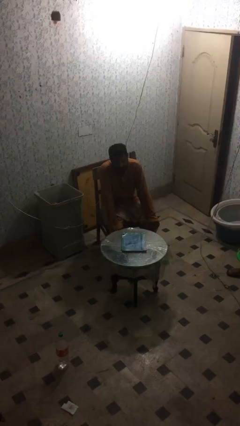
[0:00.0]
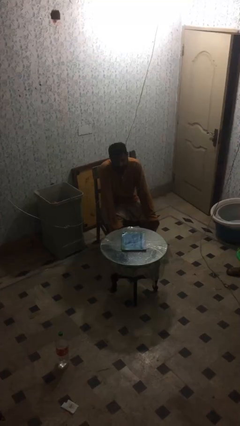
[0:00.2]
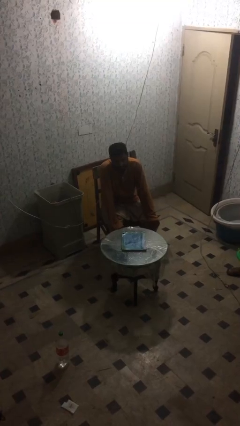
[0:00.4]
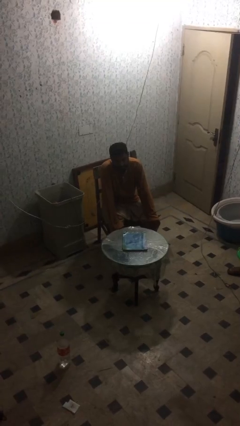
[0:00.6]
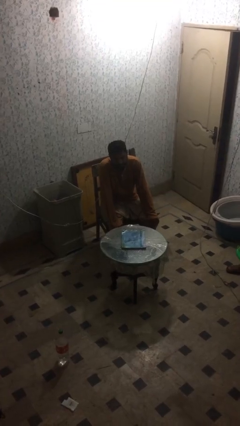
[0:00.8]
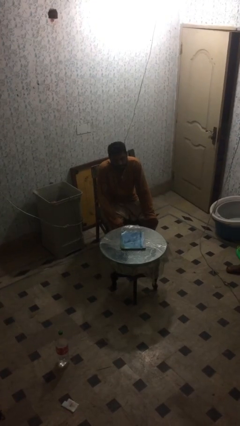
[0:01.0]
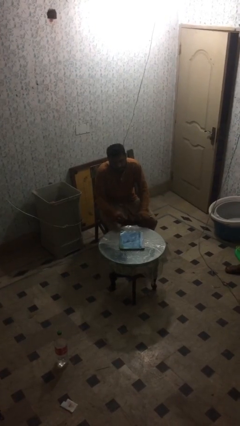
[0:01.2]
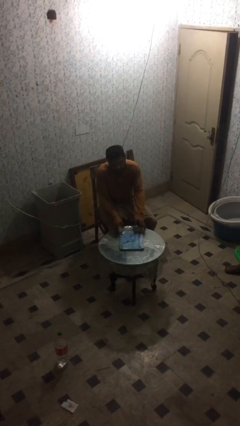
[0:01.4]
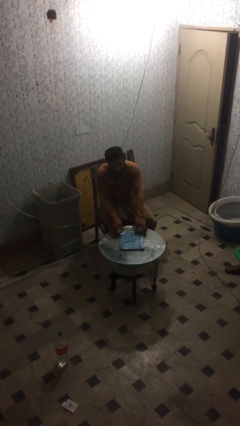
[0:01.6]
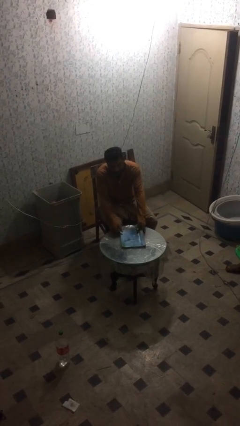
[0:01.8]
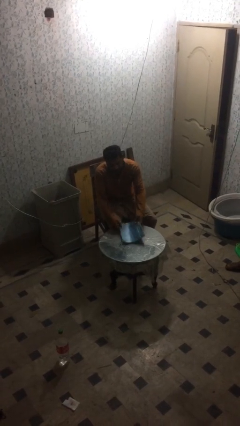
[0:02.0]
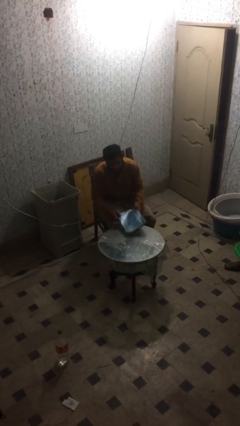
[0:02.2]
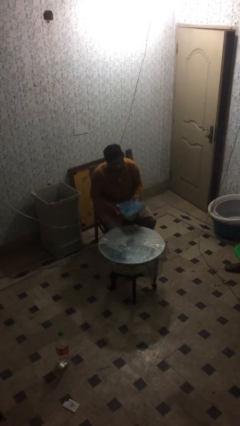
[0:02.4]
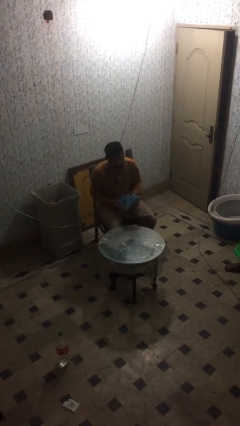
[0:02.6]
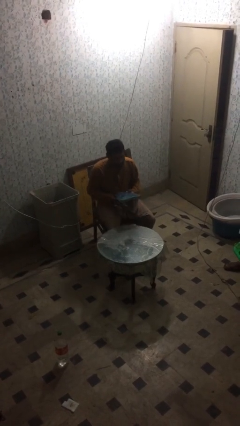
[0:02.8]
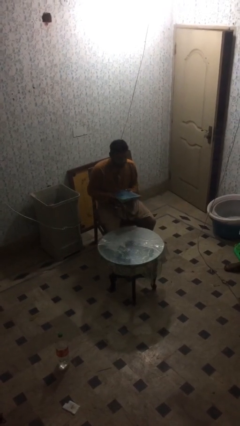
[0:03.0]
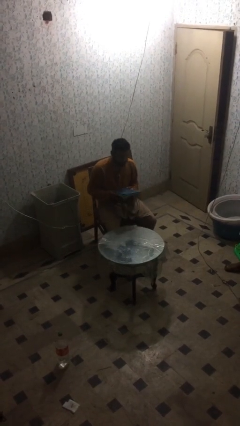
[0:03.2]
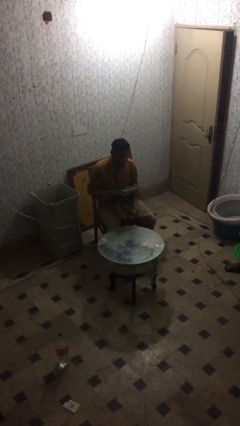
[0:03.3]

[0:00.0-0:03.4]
person picks up object from table

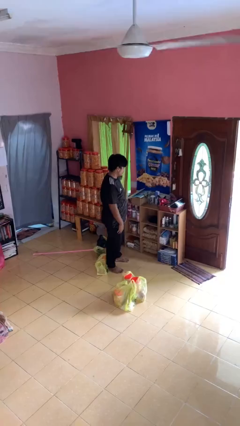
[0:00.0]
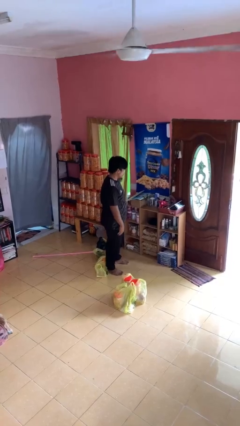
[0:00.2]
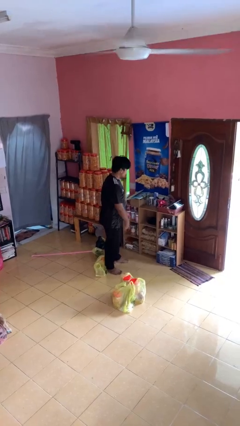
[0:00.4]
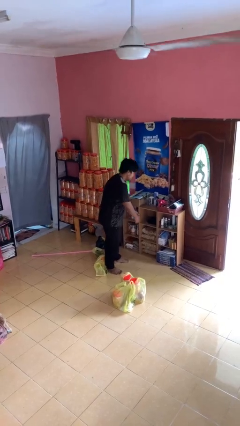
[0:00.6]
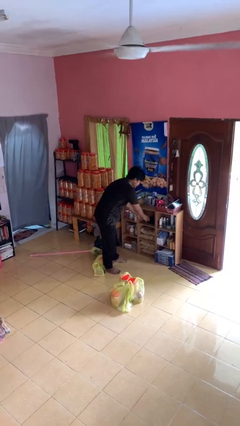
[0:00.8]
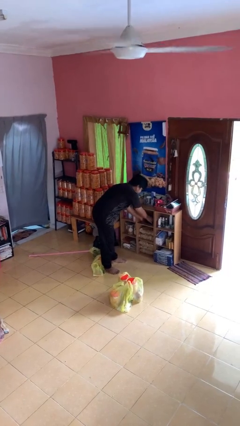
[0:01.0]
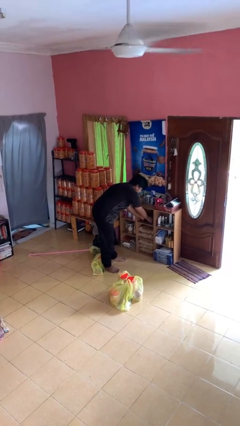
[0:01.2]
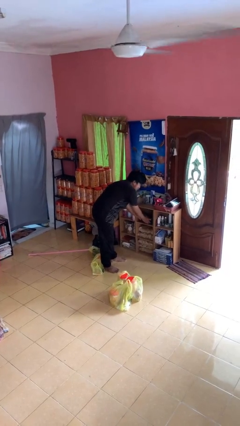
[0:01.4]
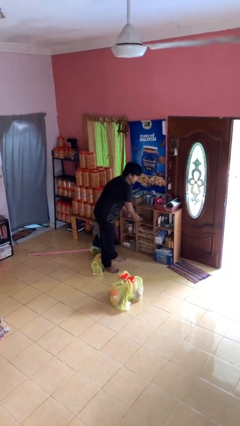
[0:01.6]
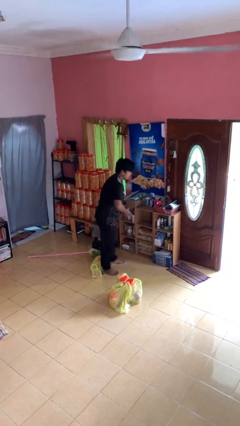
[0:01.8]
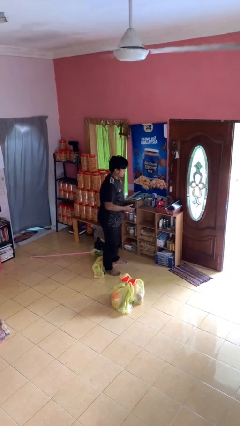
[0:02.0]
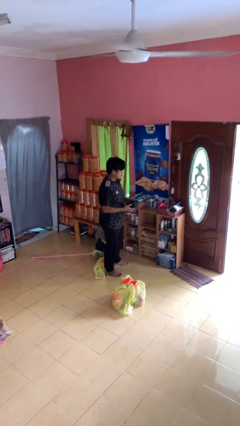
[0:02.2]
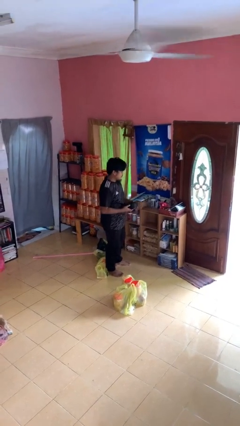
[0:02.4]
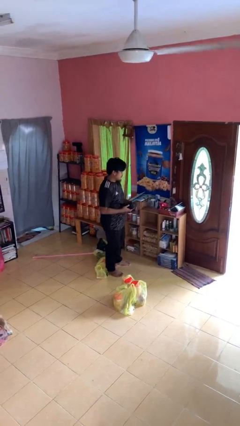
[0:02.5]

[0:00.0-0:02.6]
person takes object from cabinet

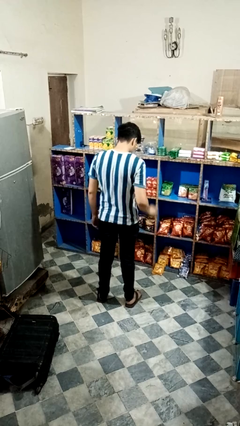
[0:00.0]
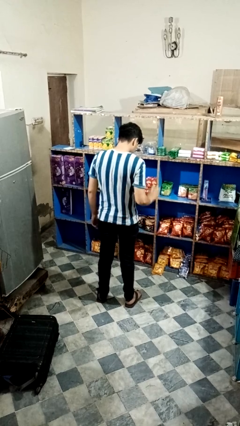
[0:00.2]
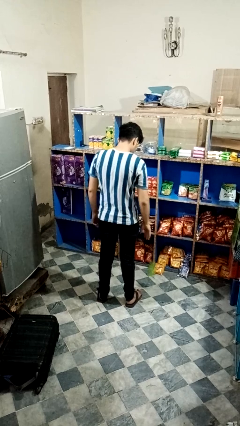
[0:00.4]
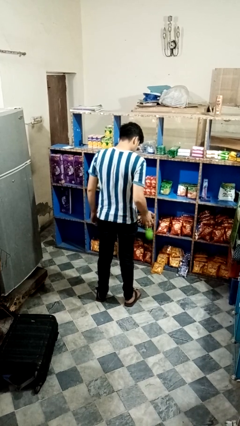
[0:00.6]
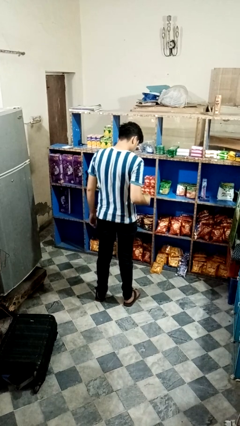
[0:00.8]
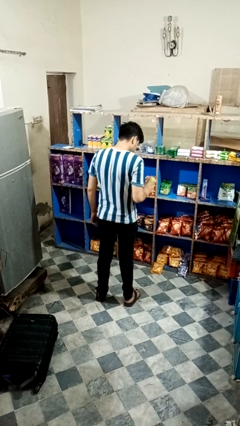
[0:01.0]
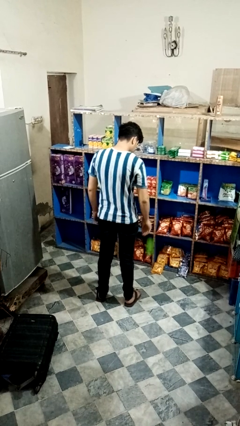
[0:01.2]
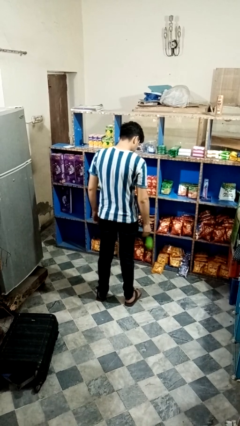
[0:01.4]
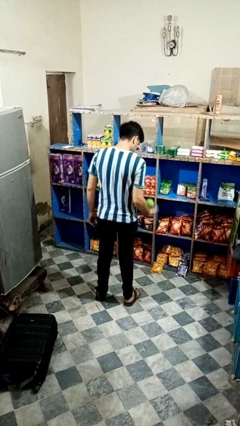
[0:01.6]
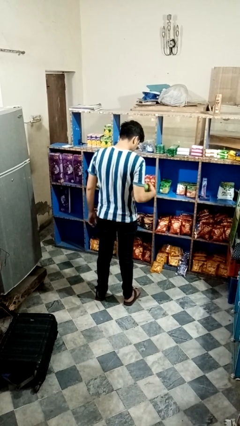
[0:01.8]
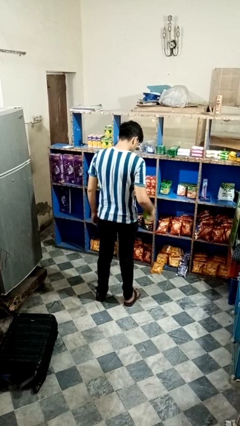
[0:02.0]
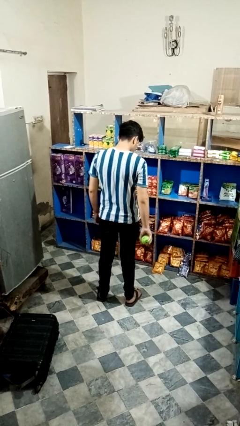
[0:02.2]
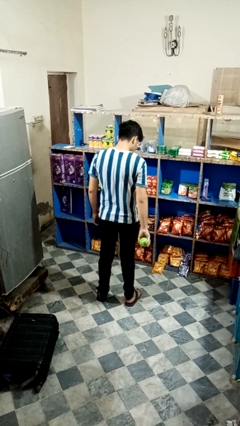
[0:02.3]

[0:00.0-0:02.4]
person bounces ball on floor

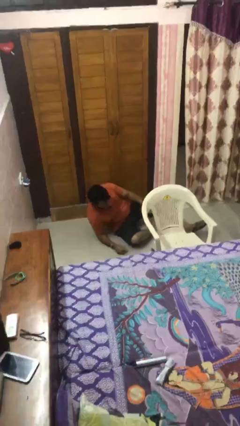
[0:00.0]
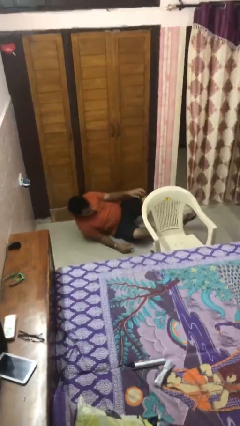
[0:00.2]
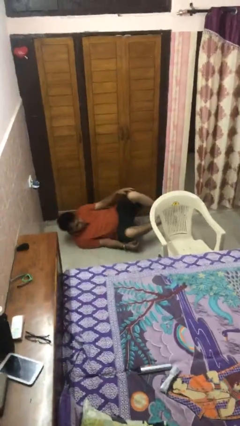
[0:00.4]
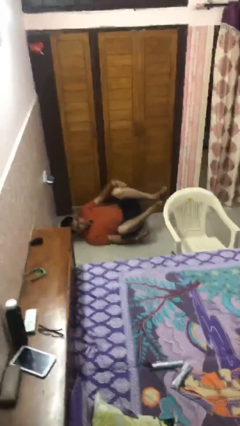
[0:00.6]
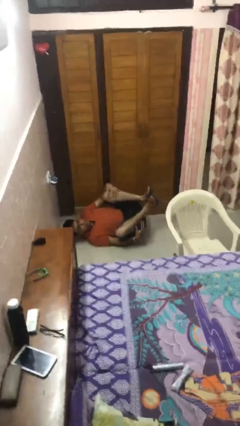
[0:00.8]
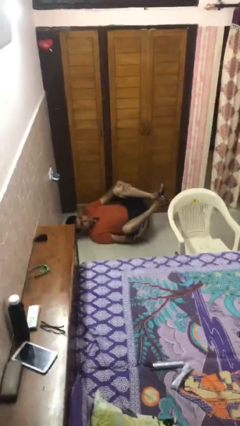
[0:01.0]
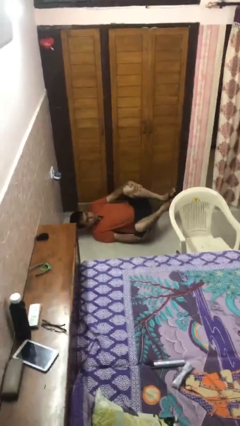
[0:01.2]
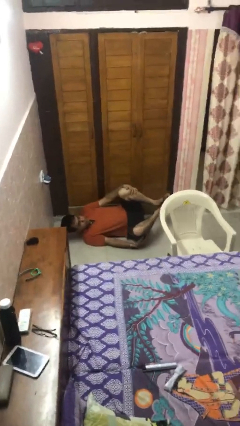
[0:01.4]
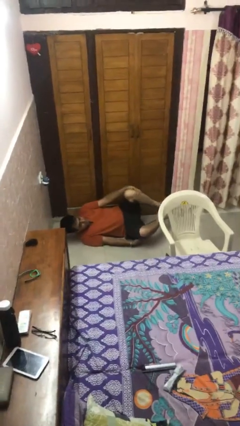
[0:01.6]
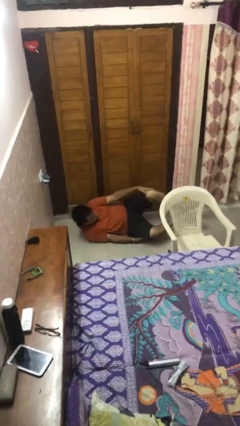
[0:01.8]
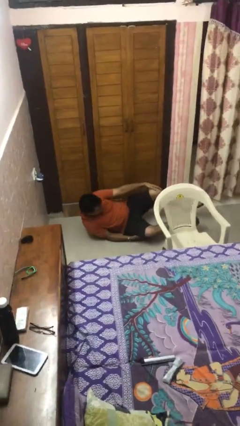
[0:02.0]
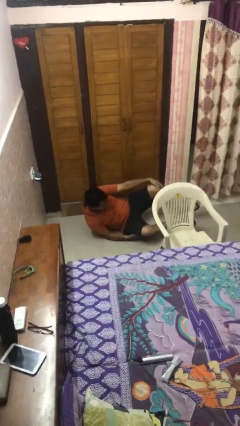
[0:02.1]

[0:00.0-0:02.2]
person lies down on floor

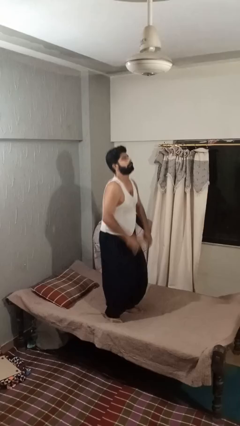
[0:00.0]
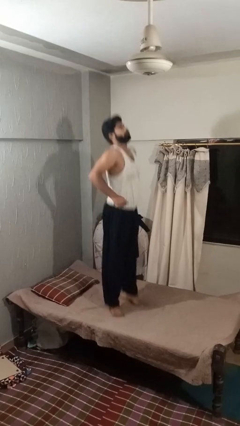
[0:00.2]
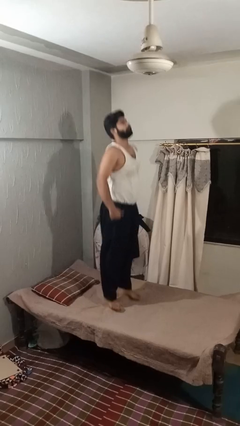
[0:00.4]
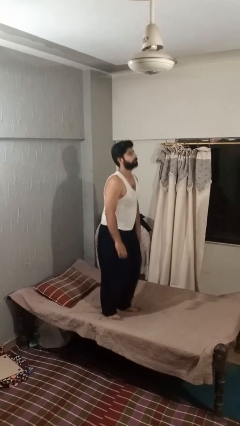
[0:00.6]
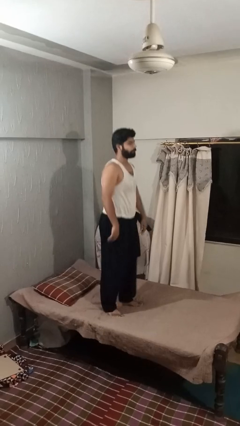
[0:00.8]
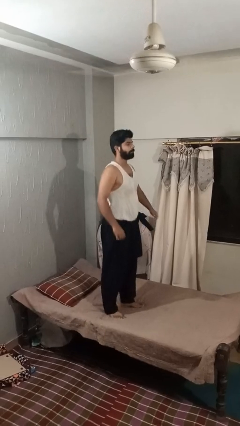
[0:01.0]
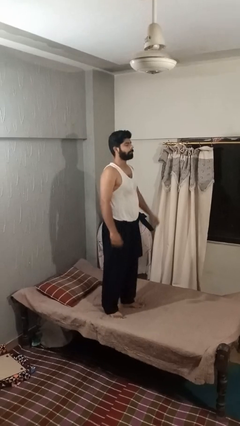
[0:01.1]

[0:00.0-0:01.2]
person jumps on bed

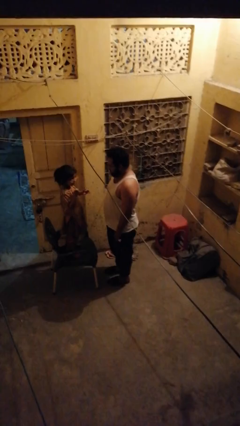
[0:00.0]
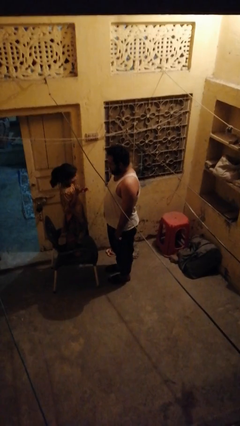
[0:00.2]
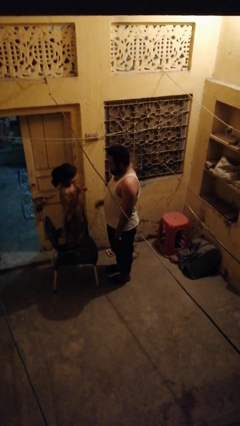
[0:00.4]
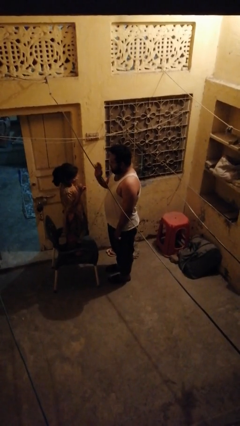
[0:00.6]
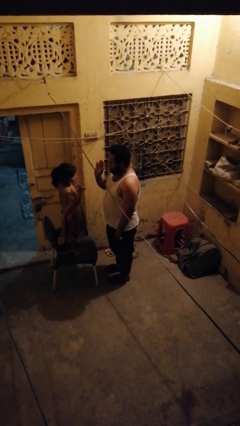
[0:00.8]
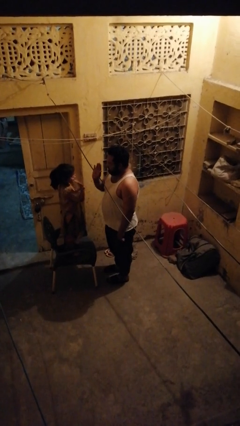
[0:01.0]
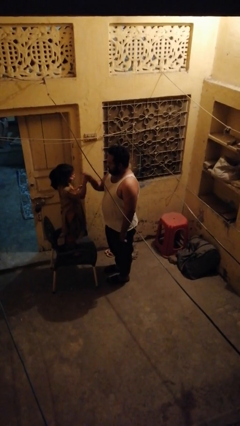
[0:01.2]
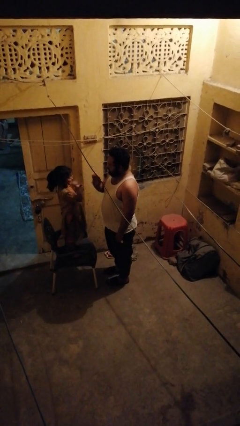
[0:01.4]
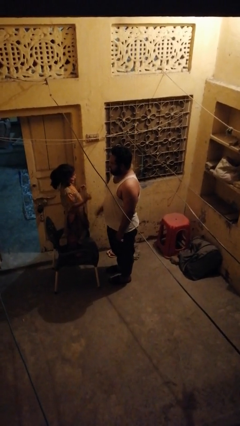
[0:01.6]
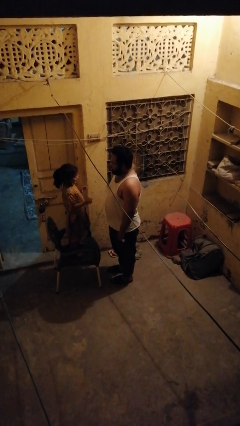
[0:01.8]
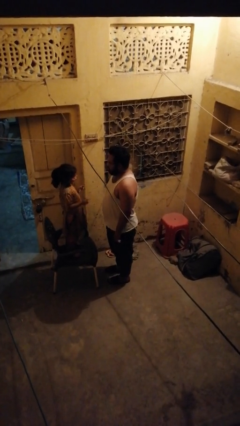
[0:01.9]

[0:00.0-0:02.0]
person highfives hand

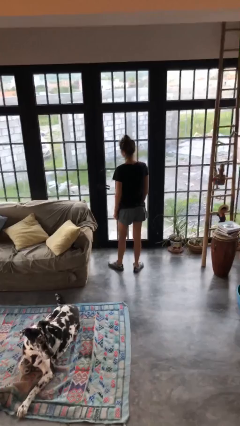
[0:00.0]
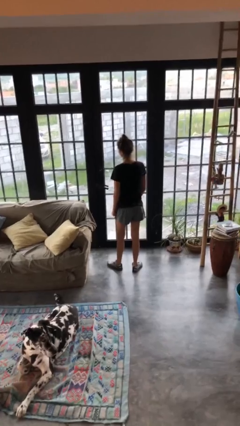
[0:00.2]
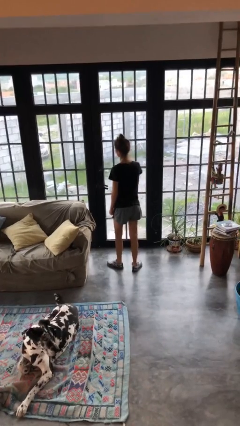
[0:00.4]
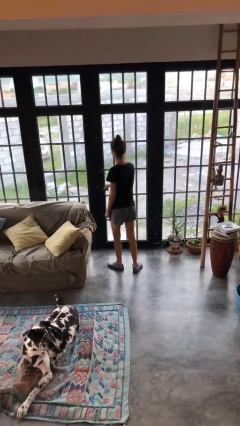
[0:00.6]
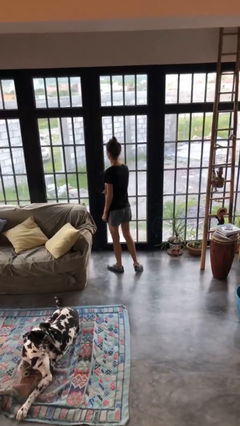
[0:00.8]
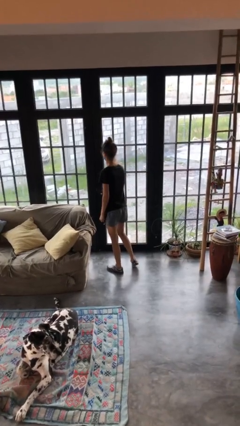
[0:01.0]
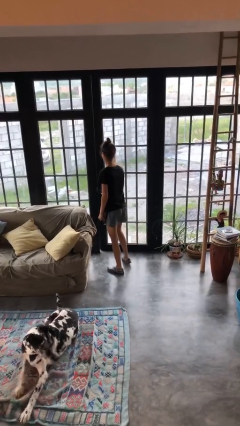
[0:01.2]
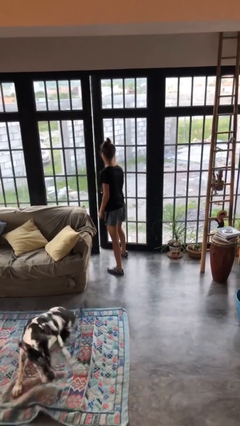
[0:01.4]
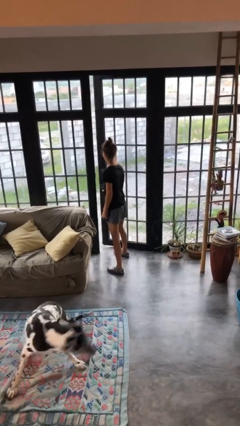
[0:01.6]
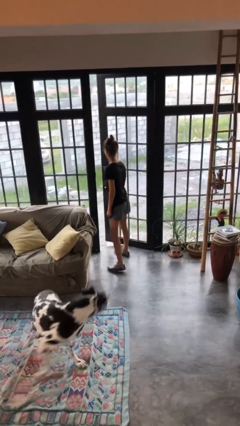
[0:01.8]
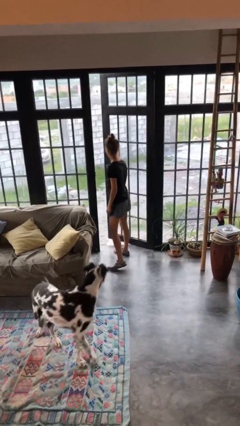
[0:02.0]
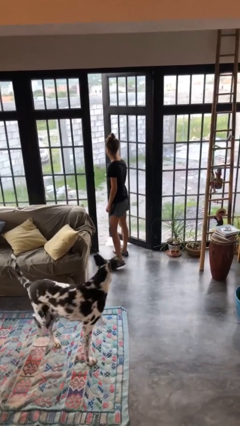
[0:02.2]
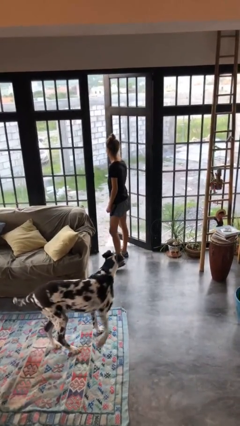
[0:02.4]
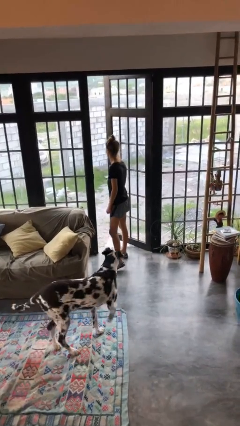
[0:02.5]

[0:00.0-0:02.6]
person opens facility door

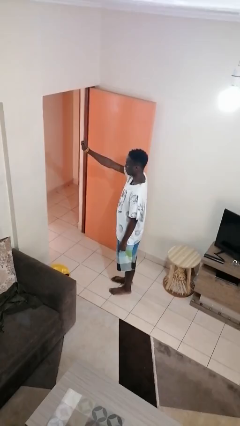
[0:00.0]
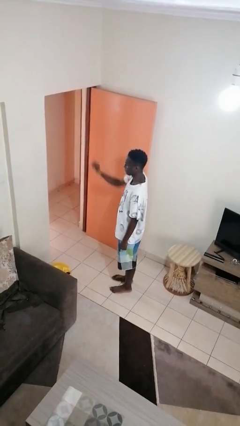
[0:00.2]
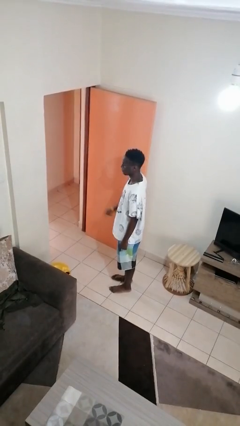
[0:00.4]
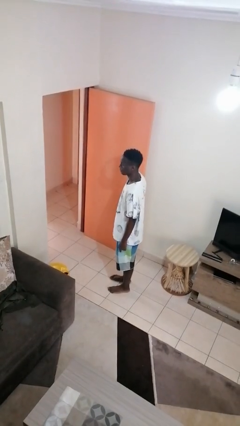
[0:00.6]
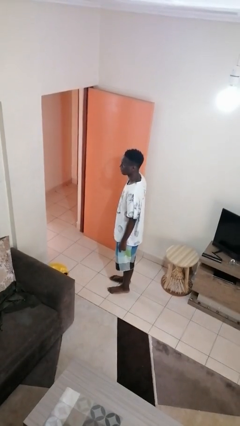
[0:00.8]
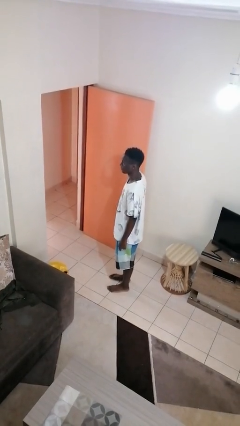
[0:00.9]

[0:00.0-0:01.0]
person gestures number one
